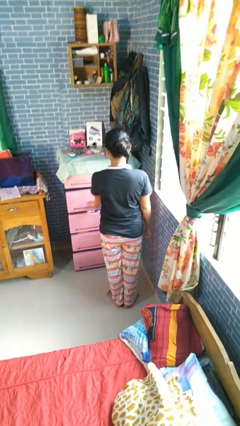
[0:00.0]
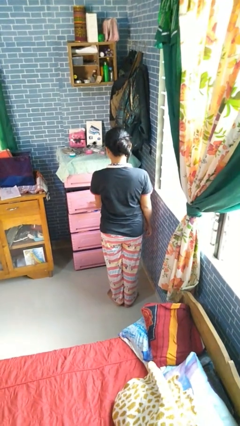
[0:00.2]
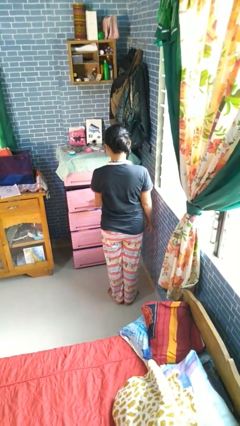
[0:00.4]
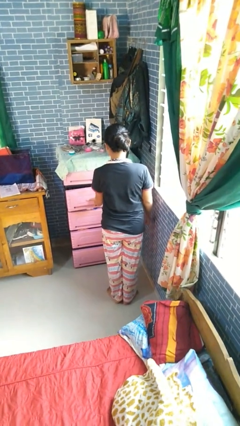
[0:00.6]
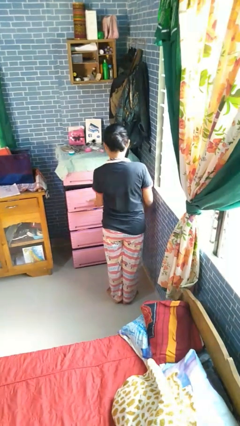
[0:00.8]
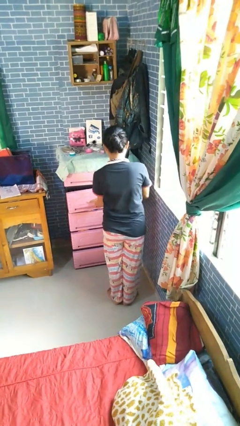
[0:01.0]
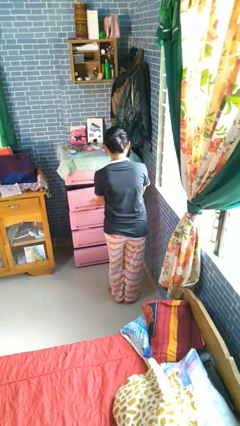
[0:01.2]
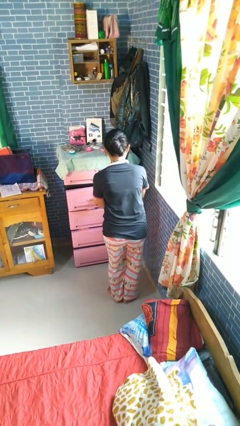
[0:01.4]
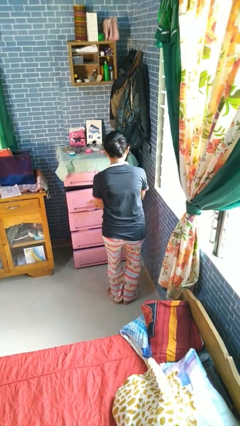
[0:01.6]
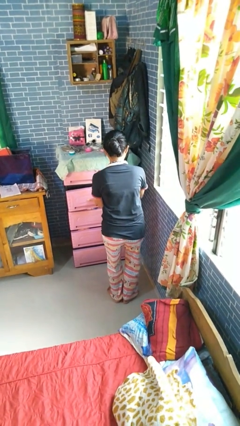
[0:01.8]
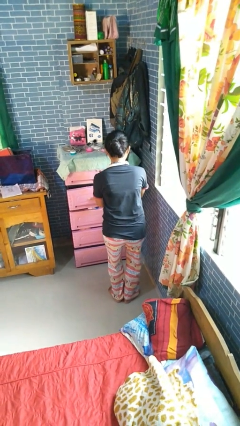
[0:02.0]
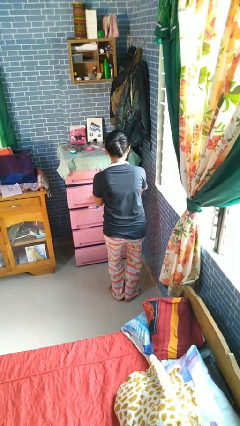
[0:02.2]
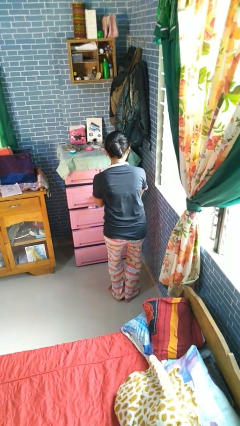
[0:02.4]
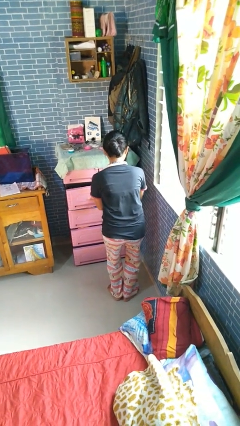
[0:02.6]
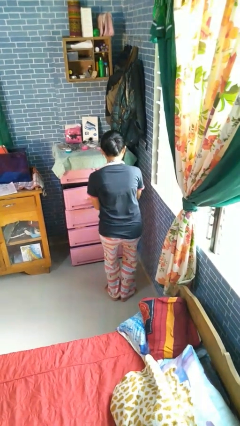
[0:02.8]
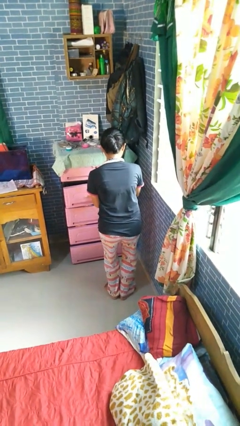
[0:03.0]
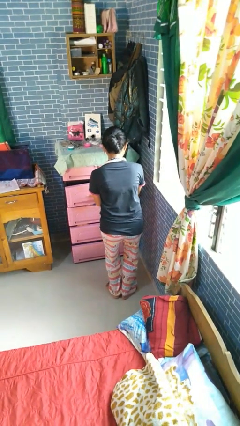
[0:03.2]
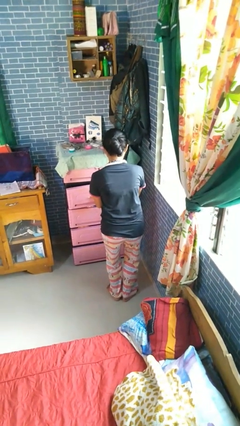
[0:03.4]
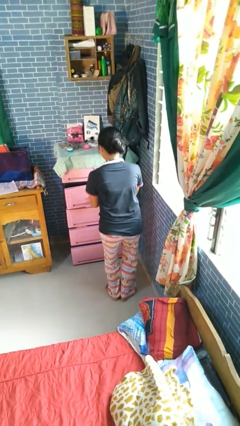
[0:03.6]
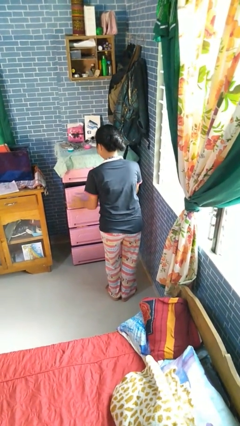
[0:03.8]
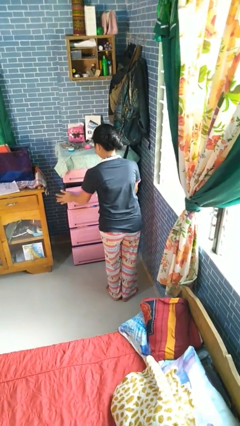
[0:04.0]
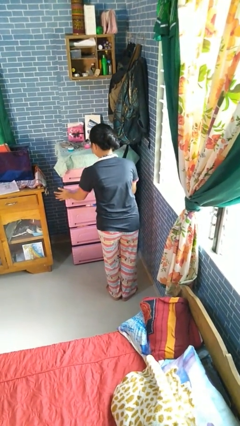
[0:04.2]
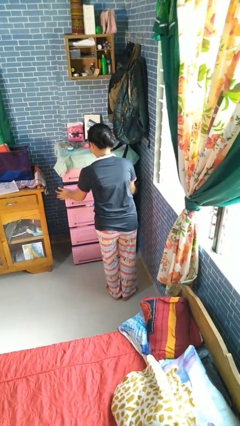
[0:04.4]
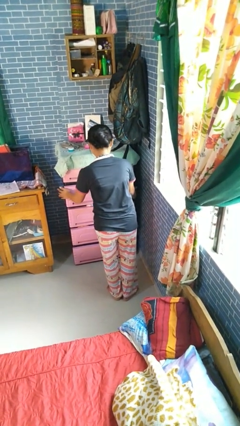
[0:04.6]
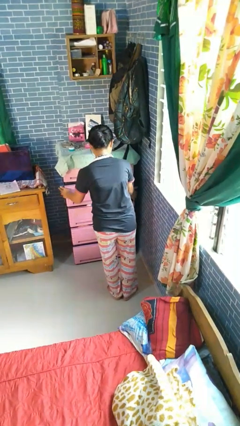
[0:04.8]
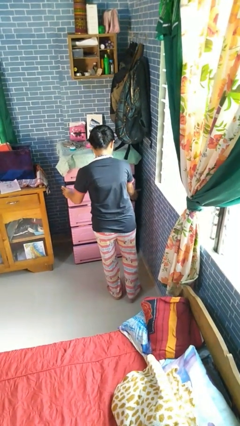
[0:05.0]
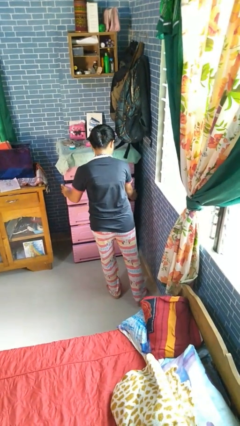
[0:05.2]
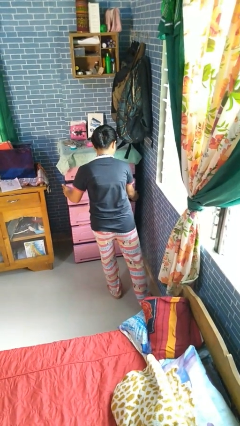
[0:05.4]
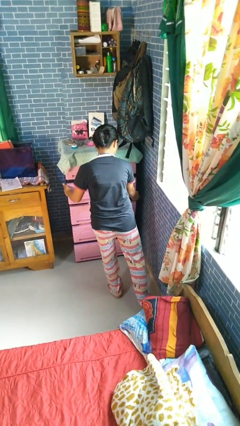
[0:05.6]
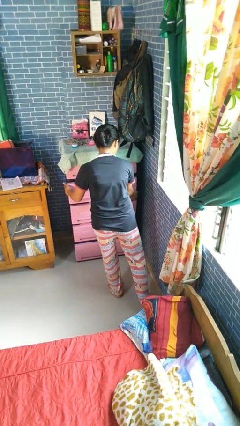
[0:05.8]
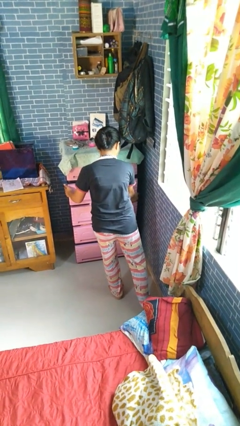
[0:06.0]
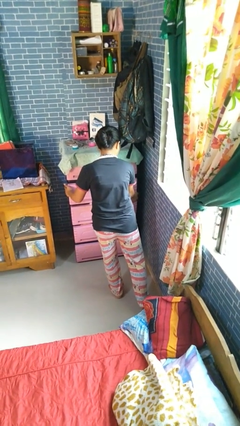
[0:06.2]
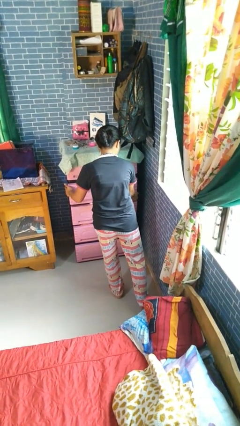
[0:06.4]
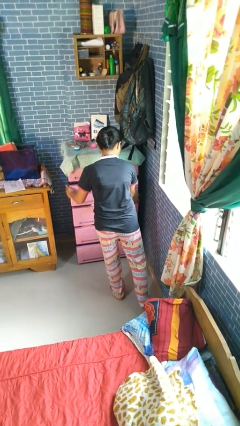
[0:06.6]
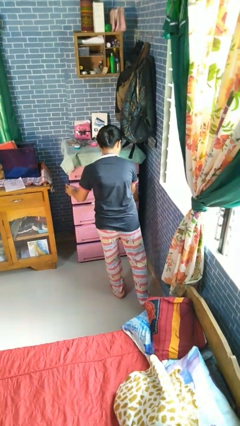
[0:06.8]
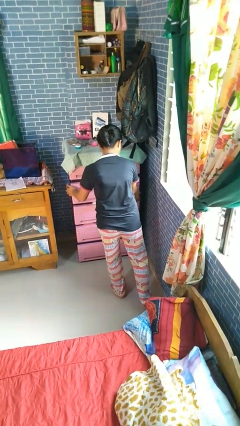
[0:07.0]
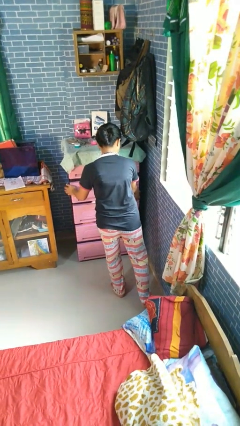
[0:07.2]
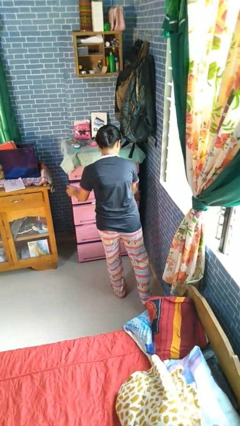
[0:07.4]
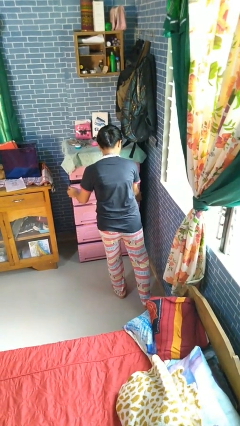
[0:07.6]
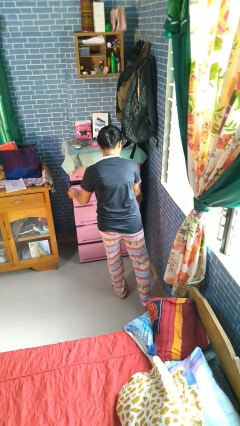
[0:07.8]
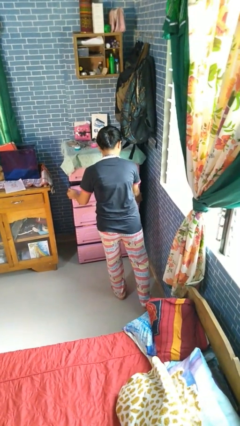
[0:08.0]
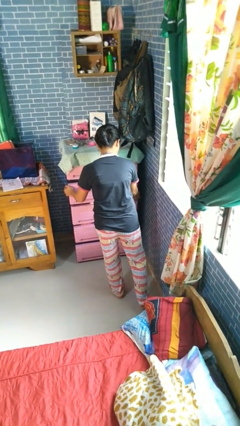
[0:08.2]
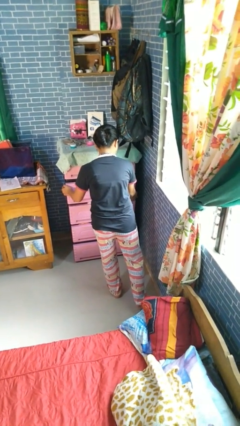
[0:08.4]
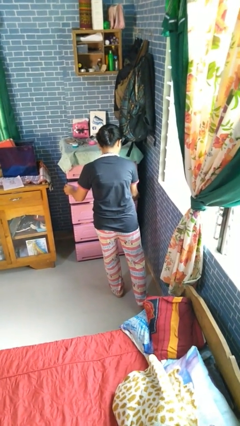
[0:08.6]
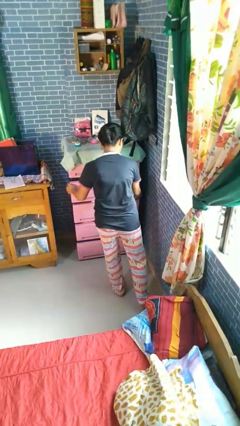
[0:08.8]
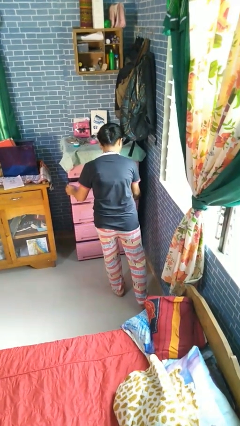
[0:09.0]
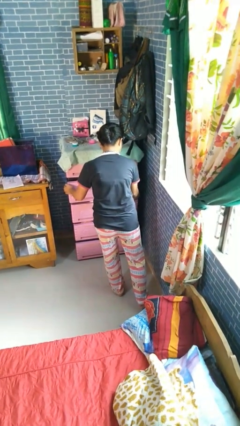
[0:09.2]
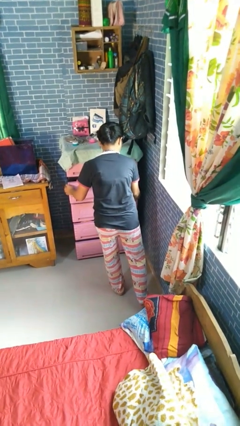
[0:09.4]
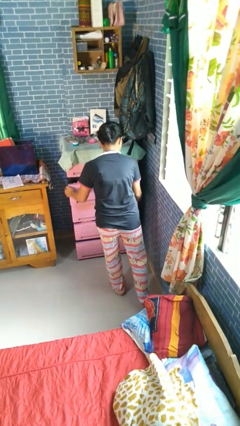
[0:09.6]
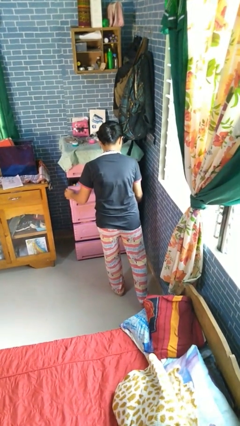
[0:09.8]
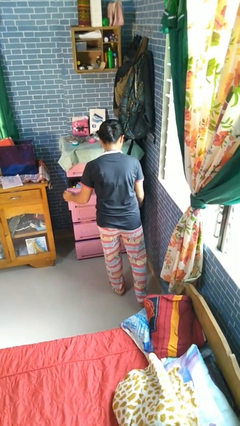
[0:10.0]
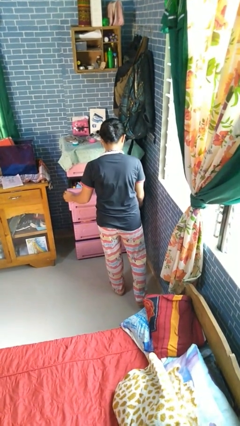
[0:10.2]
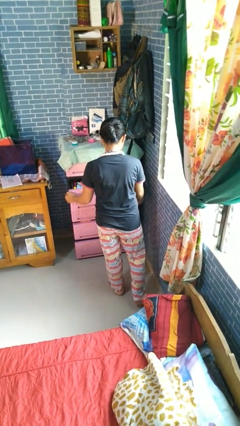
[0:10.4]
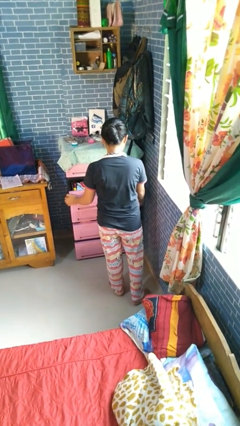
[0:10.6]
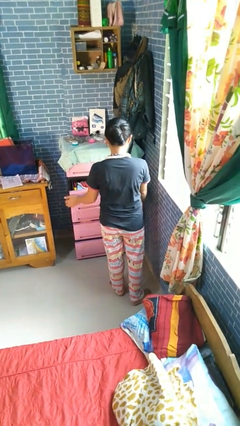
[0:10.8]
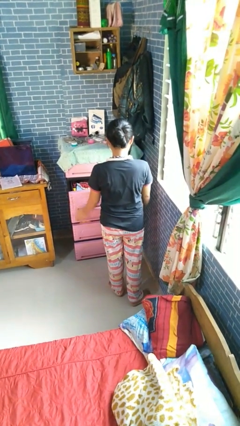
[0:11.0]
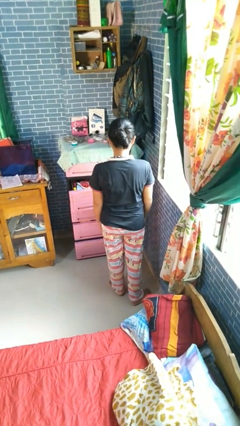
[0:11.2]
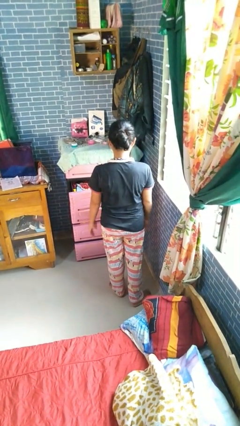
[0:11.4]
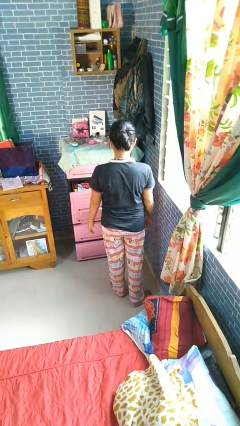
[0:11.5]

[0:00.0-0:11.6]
person opens dresser drawer

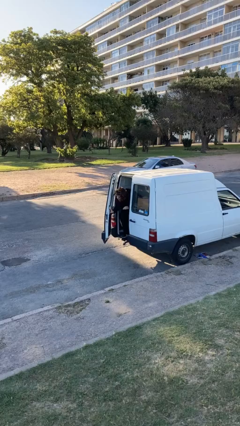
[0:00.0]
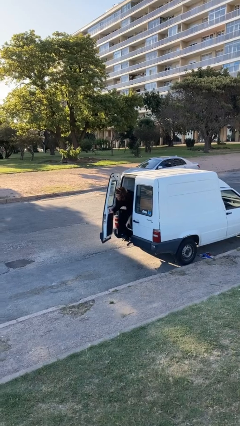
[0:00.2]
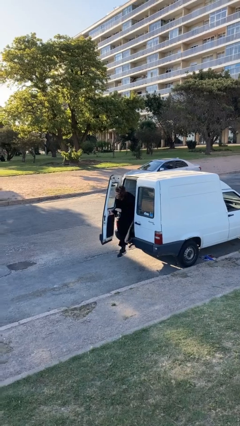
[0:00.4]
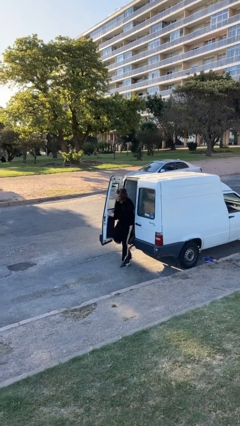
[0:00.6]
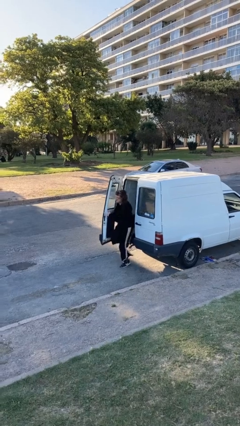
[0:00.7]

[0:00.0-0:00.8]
person opens car door

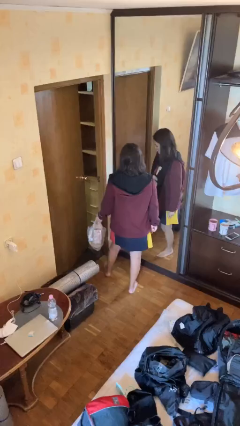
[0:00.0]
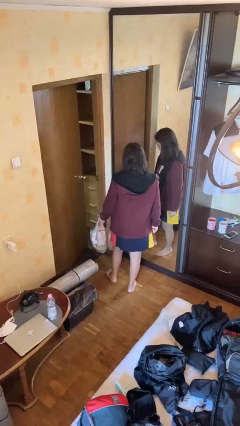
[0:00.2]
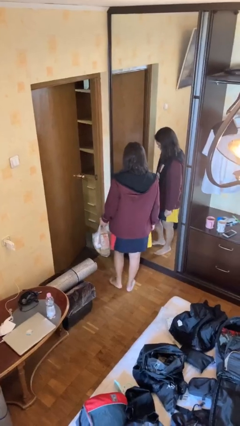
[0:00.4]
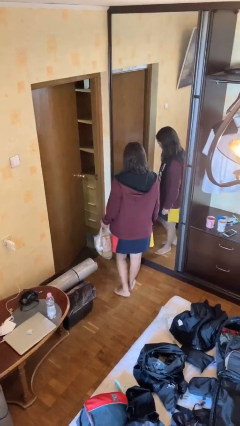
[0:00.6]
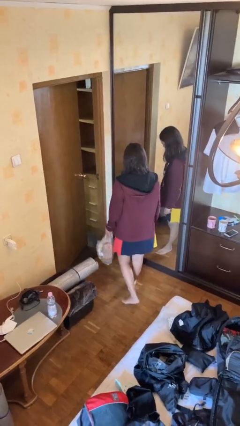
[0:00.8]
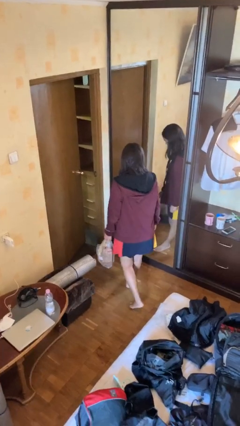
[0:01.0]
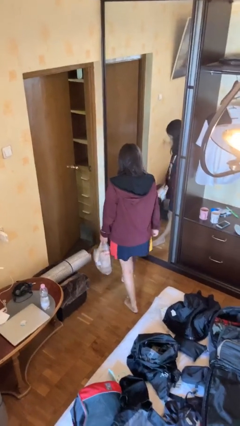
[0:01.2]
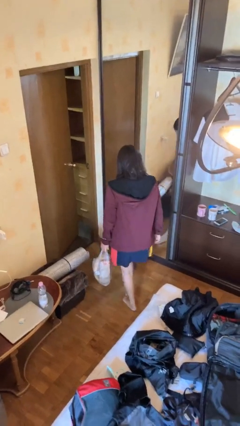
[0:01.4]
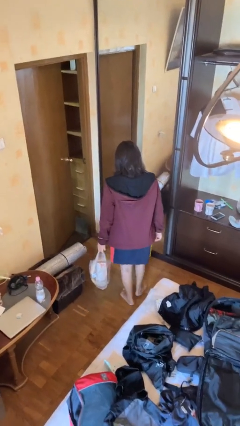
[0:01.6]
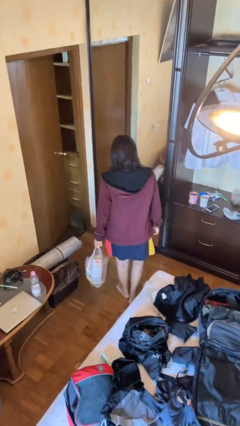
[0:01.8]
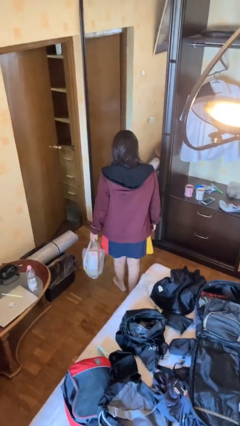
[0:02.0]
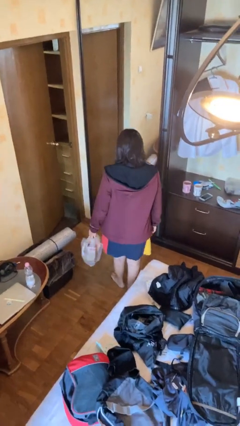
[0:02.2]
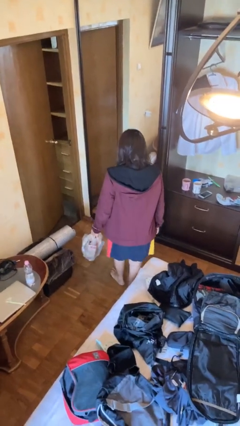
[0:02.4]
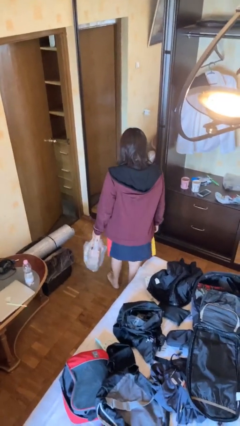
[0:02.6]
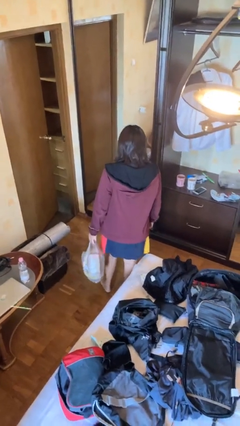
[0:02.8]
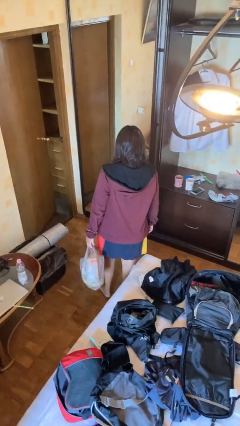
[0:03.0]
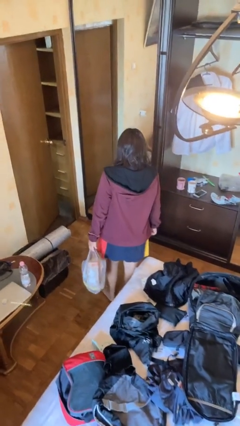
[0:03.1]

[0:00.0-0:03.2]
person carries groceries

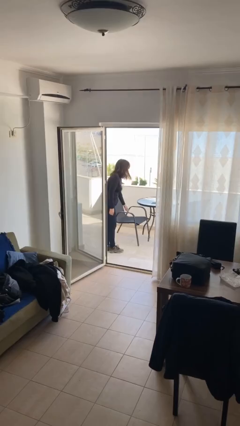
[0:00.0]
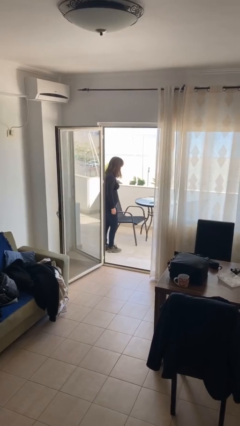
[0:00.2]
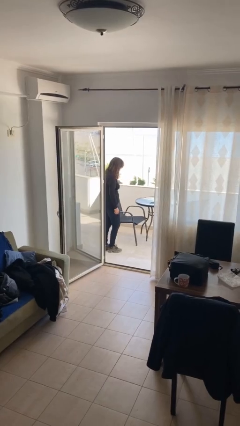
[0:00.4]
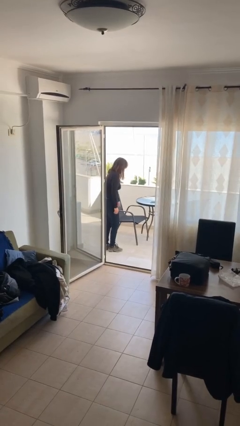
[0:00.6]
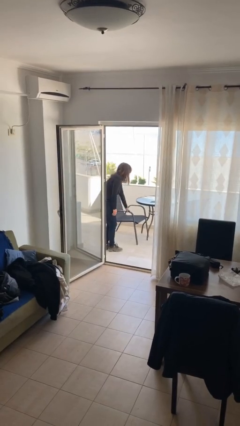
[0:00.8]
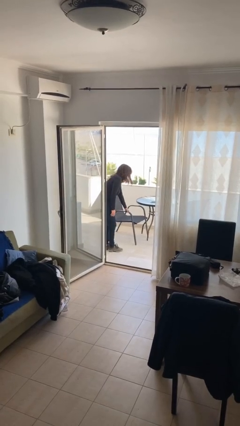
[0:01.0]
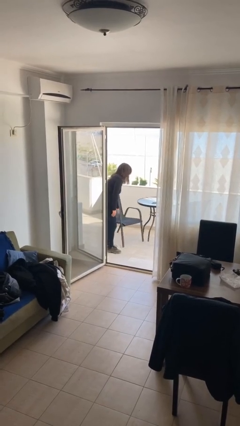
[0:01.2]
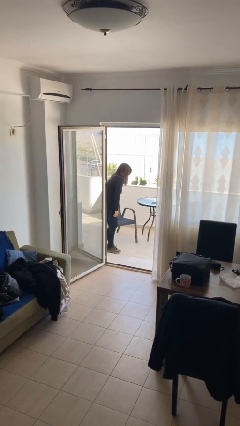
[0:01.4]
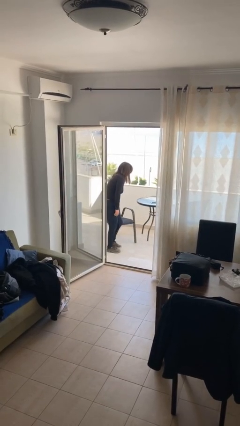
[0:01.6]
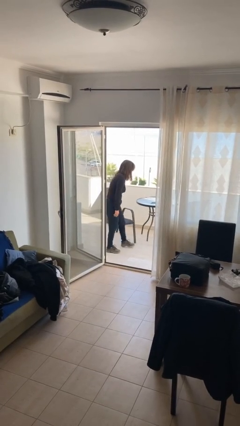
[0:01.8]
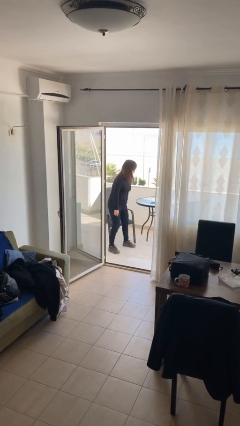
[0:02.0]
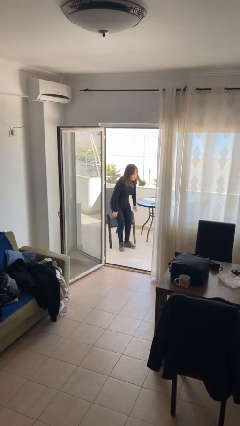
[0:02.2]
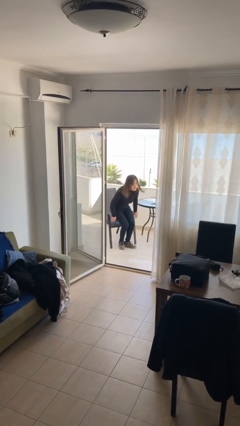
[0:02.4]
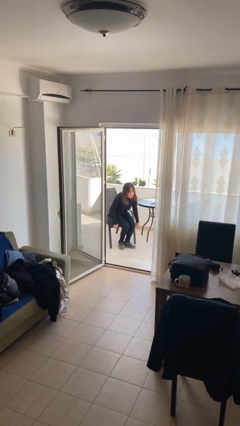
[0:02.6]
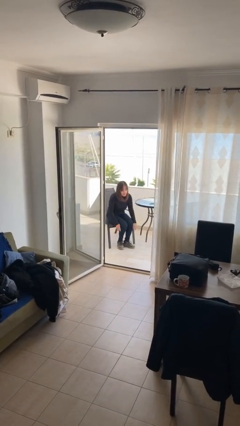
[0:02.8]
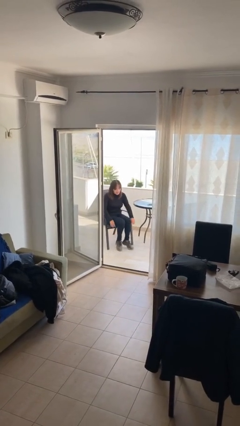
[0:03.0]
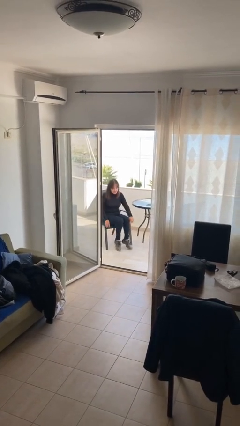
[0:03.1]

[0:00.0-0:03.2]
person sits down
